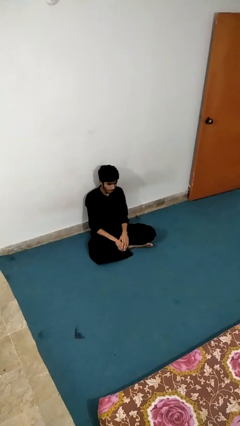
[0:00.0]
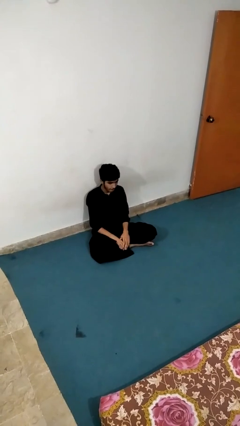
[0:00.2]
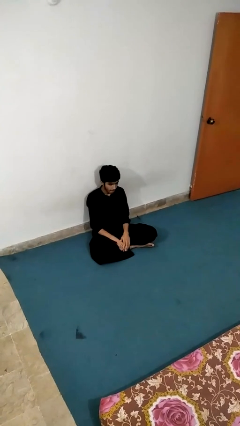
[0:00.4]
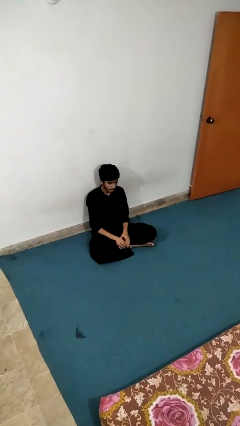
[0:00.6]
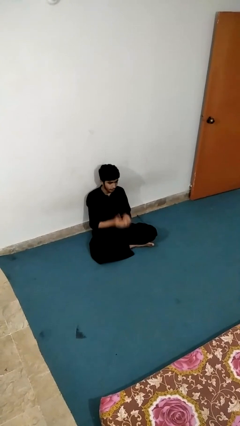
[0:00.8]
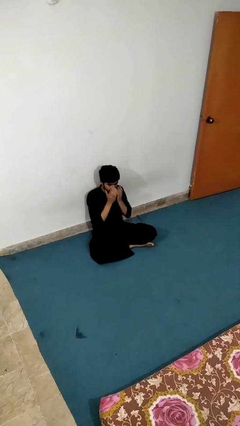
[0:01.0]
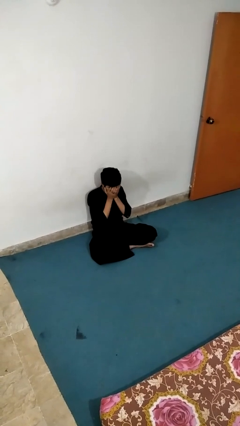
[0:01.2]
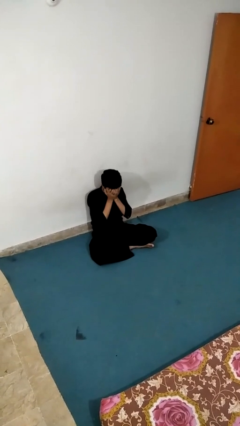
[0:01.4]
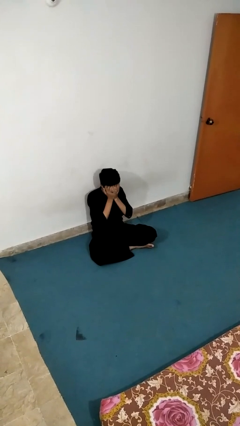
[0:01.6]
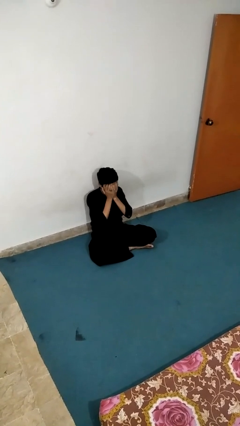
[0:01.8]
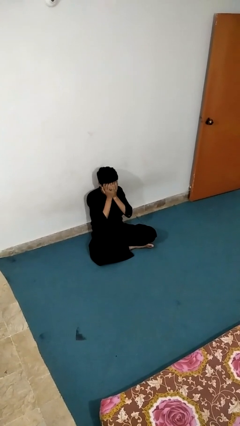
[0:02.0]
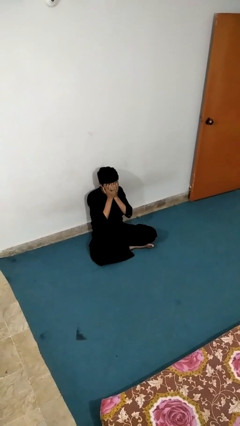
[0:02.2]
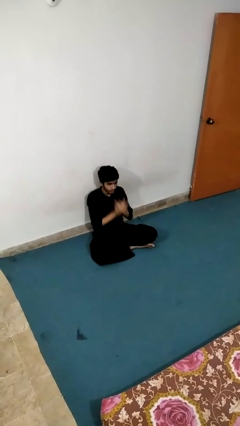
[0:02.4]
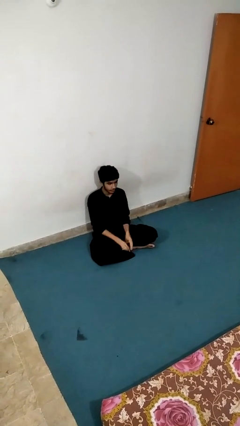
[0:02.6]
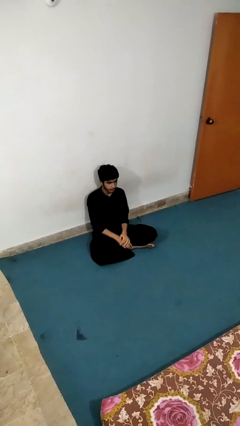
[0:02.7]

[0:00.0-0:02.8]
person covers face with hands

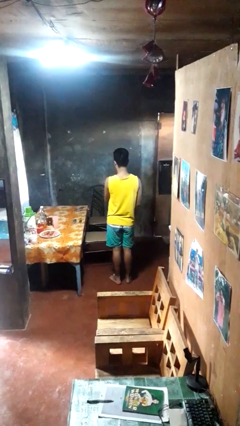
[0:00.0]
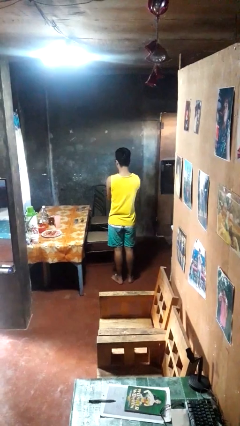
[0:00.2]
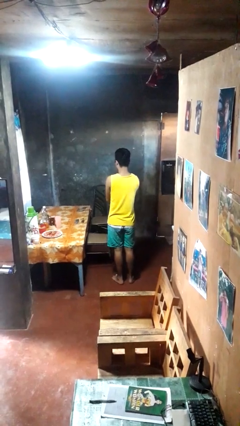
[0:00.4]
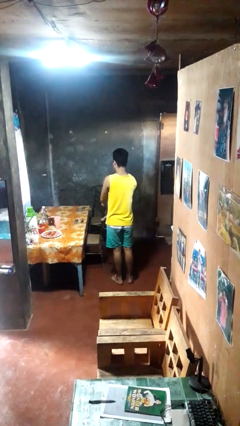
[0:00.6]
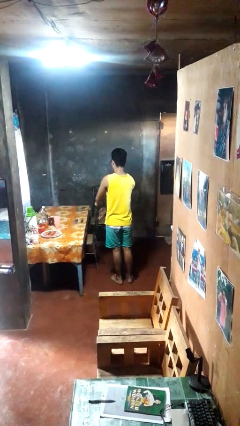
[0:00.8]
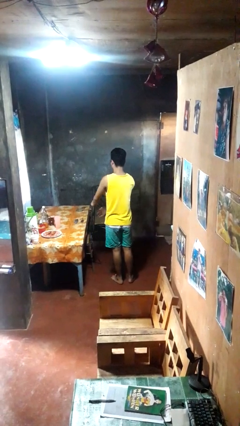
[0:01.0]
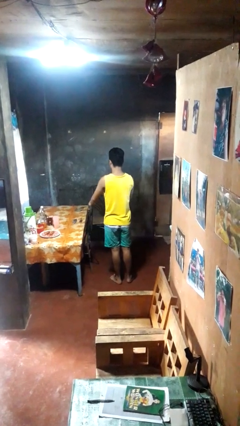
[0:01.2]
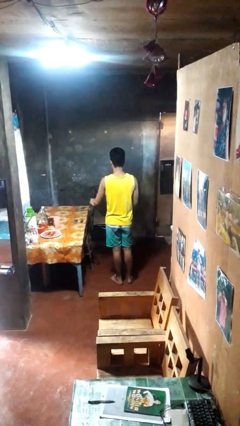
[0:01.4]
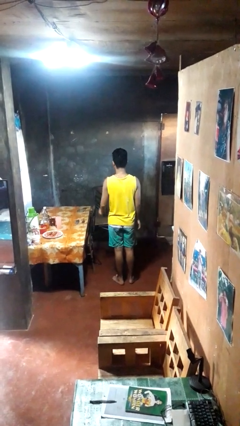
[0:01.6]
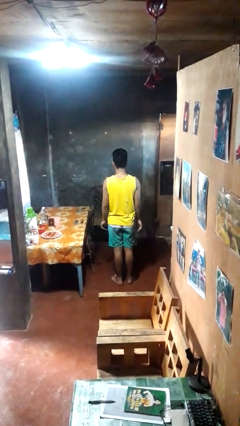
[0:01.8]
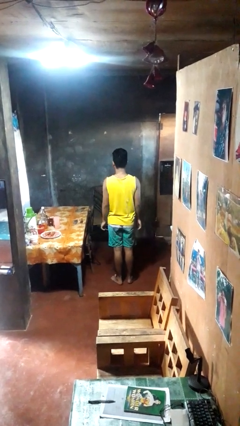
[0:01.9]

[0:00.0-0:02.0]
person pushes in chair

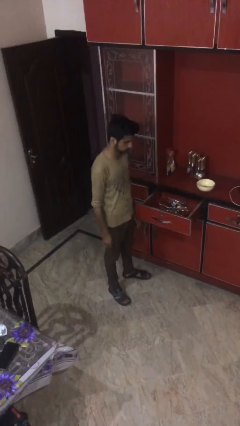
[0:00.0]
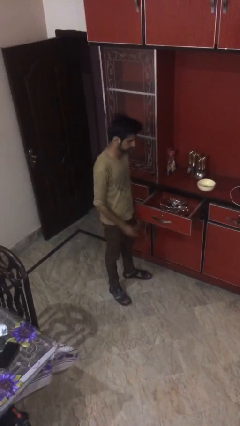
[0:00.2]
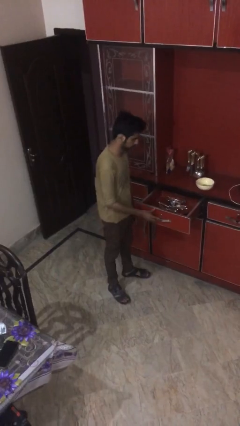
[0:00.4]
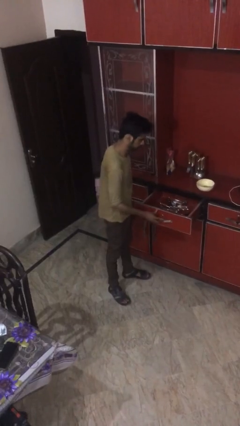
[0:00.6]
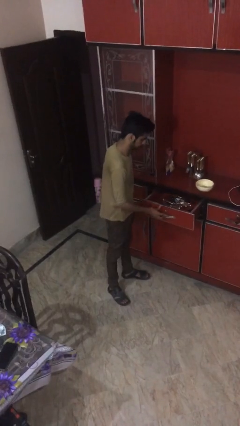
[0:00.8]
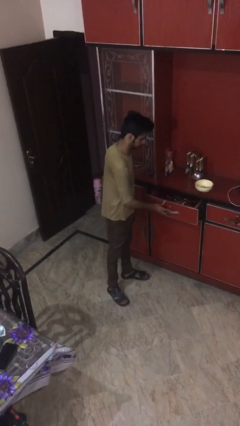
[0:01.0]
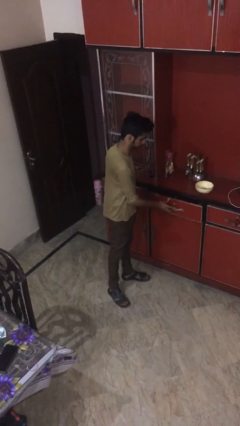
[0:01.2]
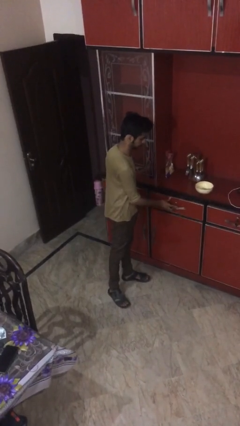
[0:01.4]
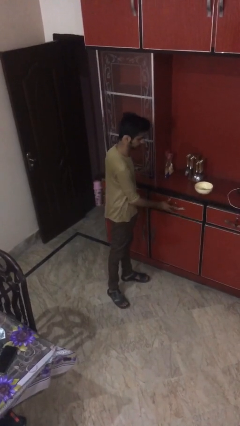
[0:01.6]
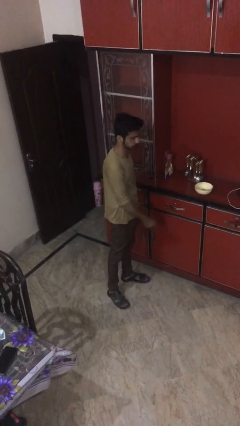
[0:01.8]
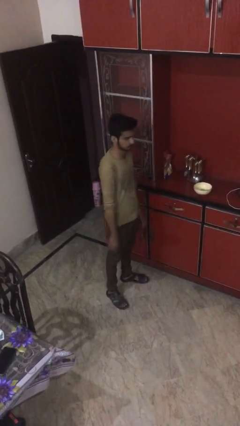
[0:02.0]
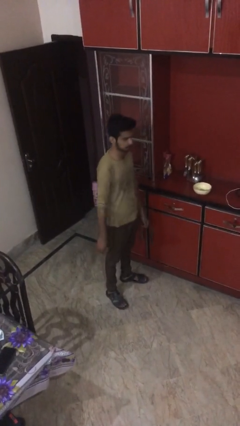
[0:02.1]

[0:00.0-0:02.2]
person closes kitchen drawer

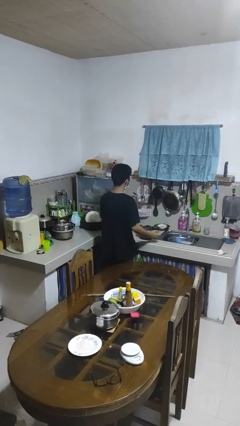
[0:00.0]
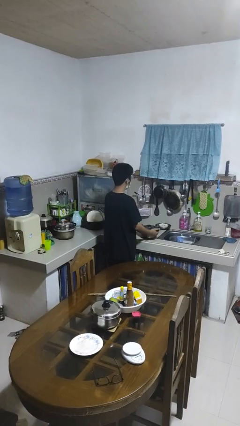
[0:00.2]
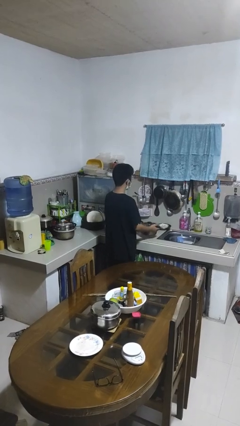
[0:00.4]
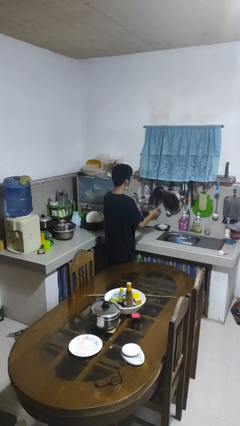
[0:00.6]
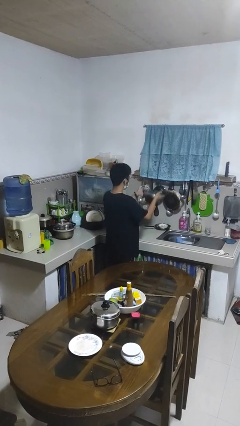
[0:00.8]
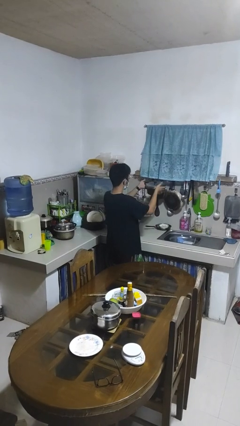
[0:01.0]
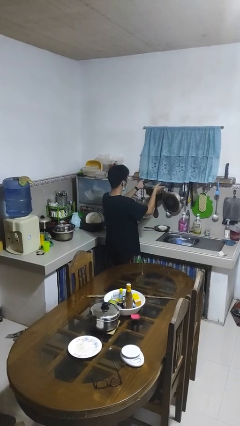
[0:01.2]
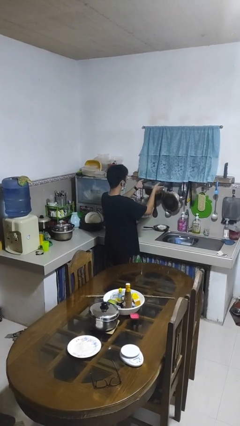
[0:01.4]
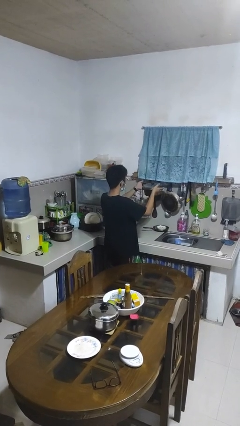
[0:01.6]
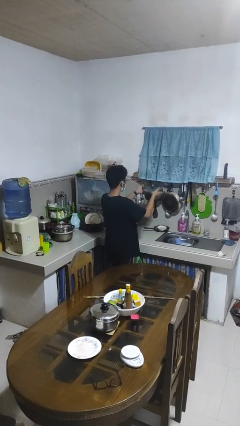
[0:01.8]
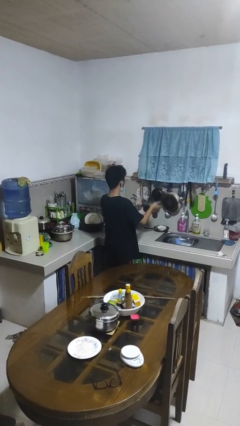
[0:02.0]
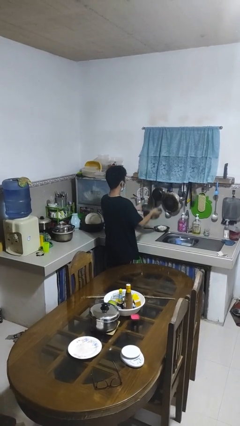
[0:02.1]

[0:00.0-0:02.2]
person picks up object from countertop

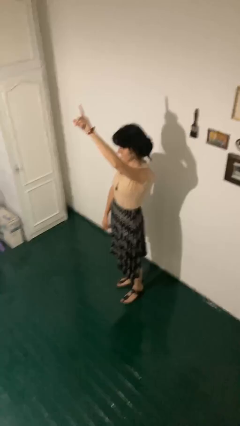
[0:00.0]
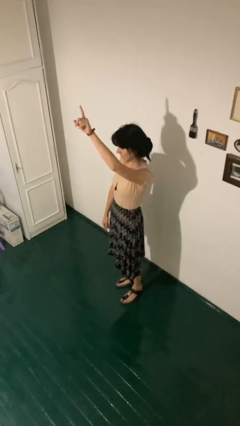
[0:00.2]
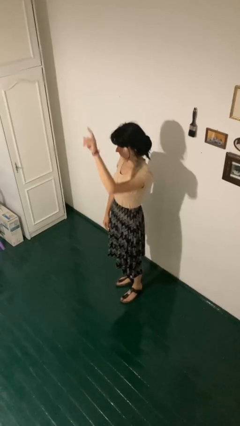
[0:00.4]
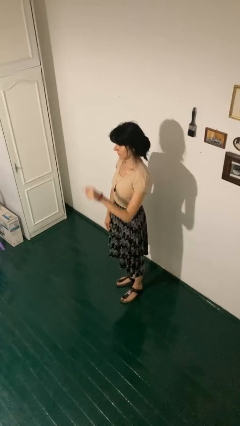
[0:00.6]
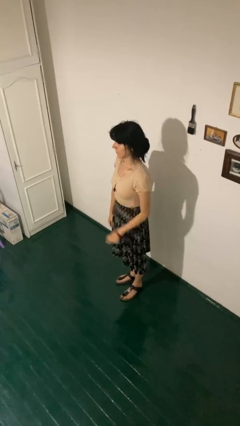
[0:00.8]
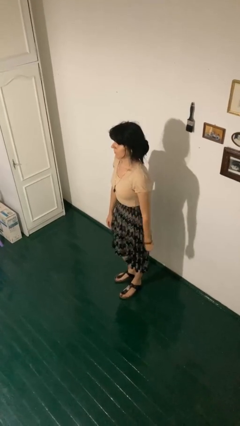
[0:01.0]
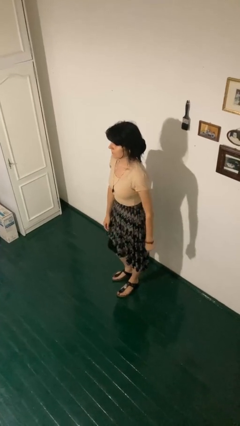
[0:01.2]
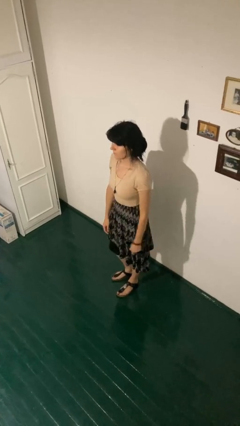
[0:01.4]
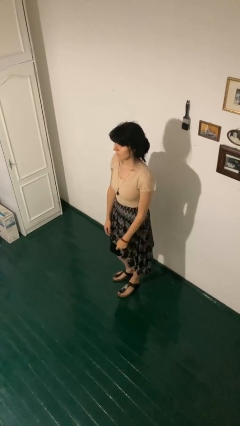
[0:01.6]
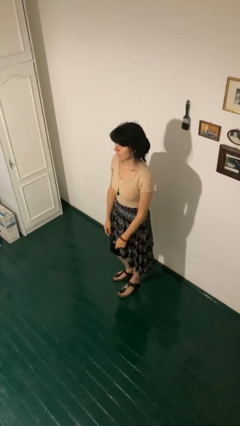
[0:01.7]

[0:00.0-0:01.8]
person gestures lower hand

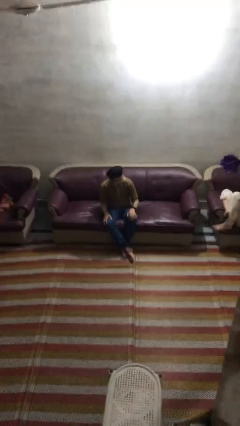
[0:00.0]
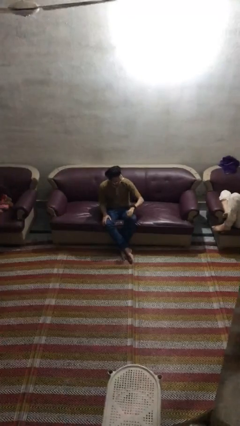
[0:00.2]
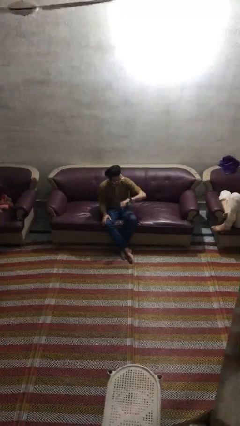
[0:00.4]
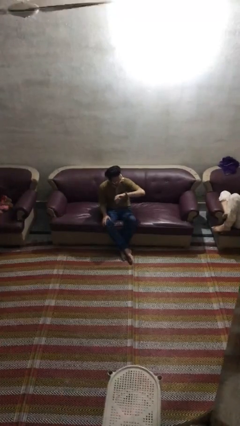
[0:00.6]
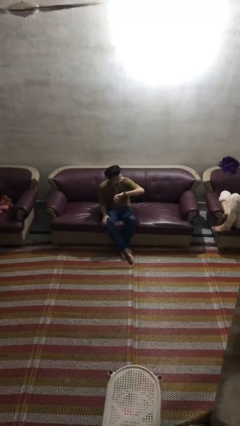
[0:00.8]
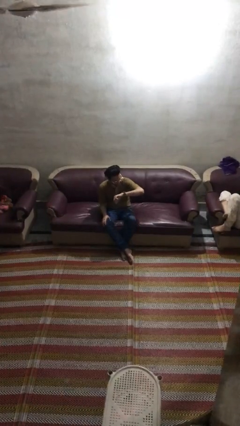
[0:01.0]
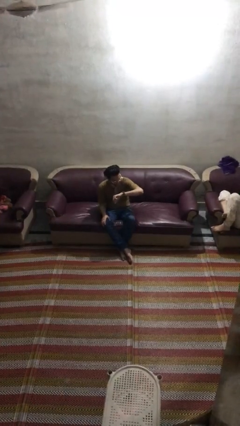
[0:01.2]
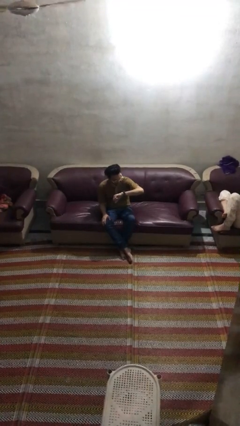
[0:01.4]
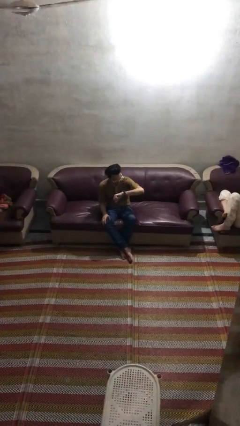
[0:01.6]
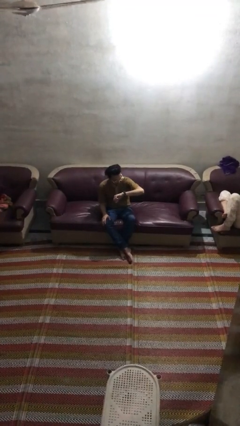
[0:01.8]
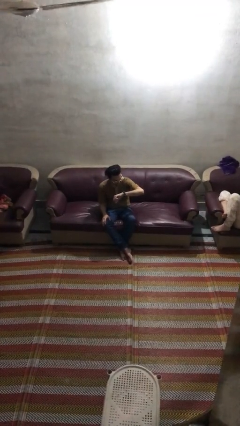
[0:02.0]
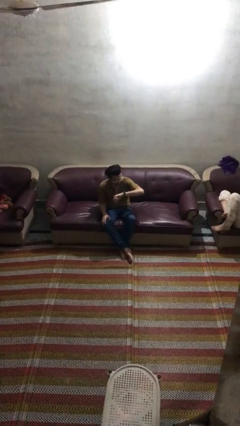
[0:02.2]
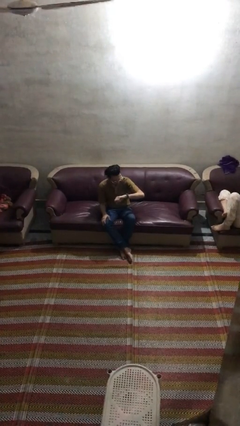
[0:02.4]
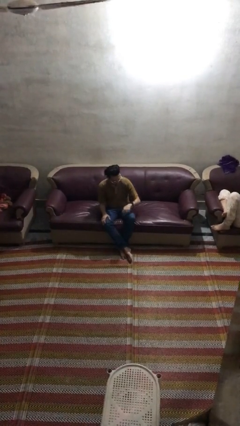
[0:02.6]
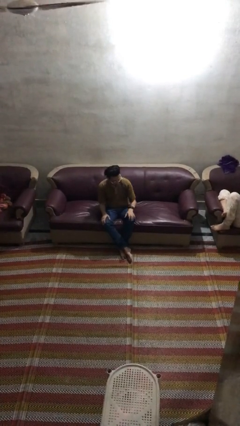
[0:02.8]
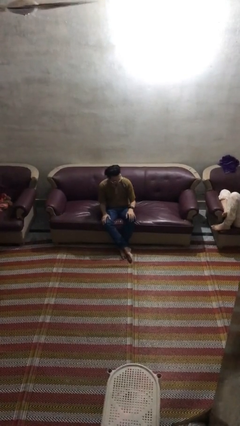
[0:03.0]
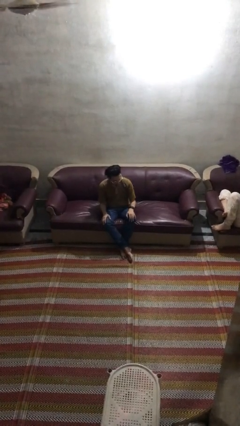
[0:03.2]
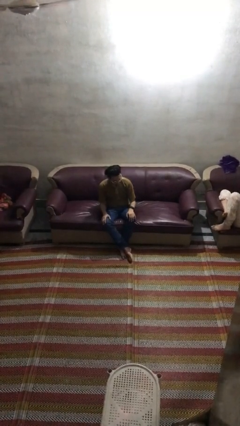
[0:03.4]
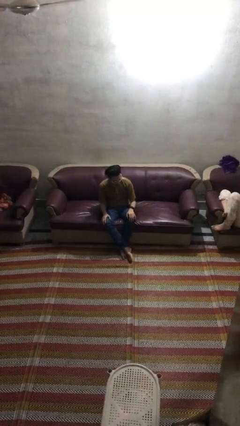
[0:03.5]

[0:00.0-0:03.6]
person looks at wristwatch

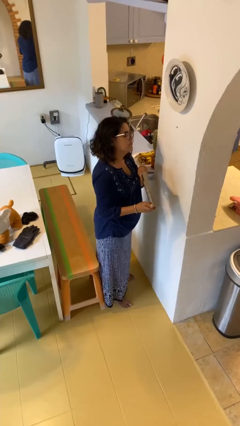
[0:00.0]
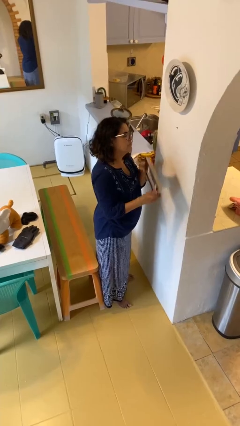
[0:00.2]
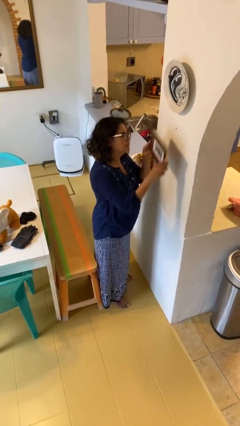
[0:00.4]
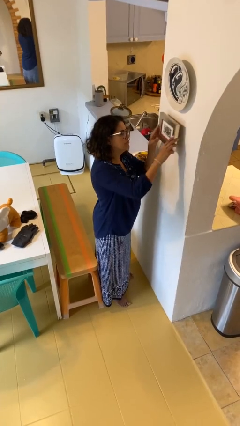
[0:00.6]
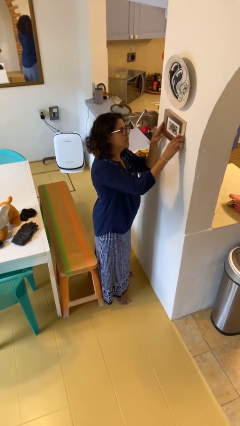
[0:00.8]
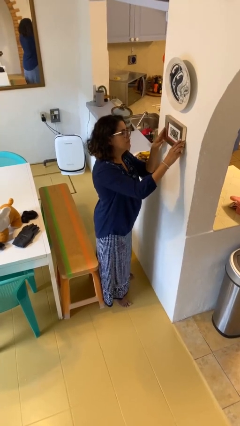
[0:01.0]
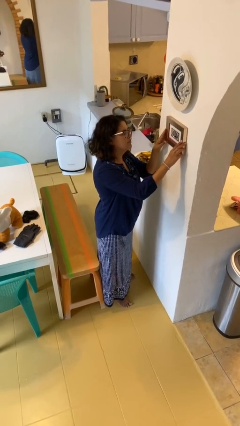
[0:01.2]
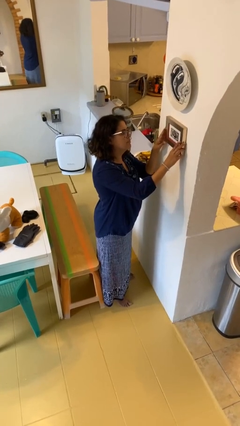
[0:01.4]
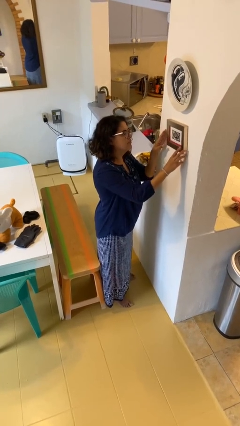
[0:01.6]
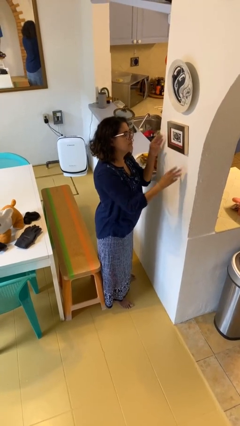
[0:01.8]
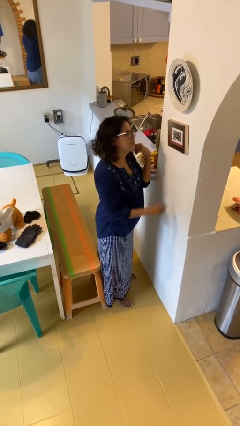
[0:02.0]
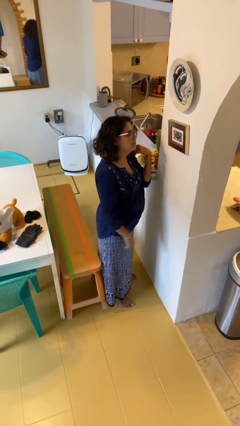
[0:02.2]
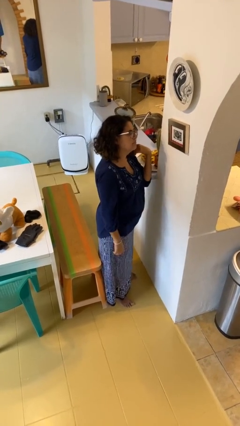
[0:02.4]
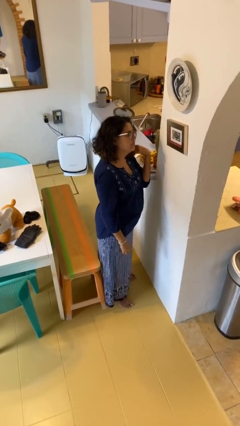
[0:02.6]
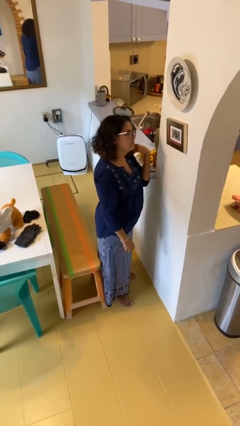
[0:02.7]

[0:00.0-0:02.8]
person puts up picture frame
